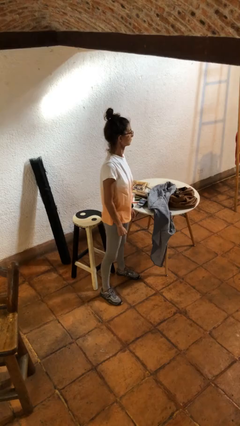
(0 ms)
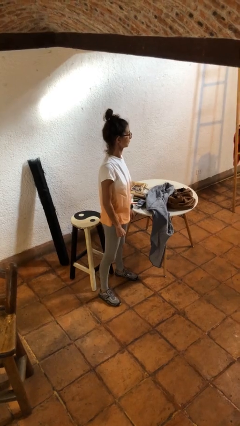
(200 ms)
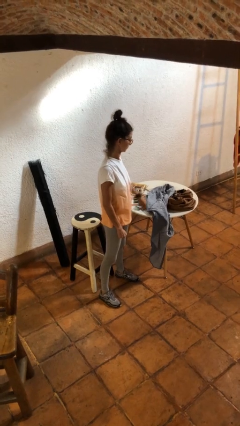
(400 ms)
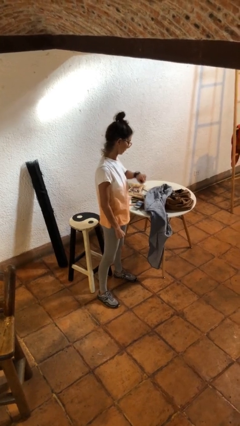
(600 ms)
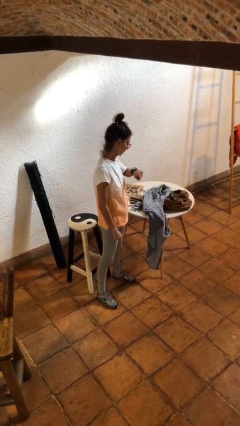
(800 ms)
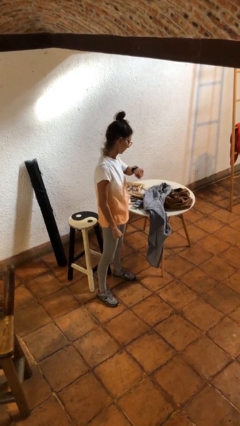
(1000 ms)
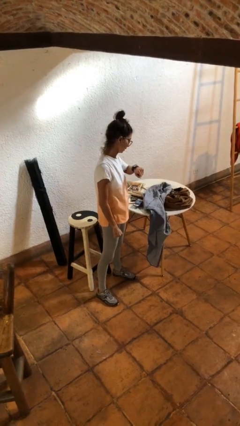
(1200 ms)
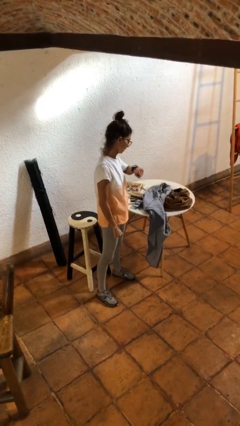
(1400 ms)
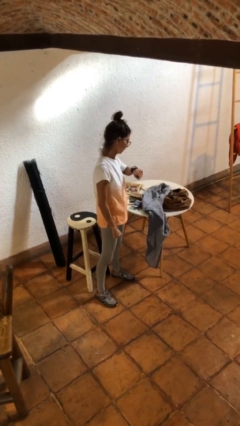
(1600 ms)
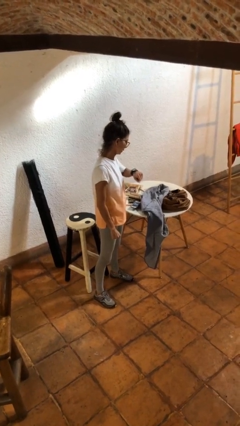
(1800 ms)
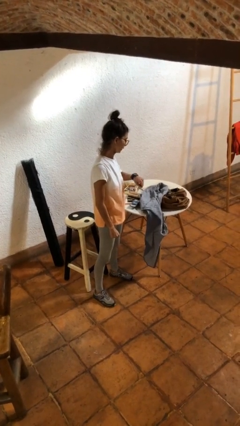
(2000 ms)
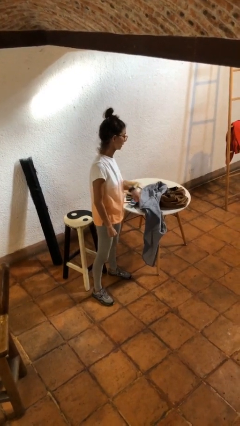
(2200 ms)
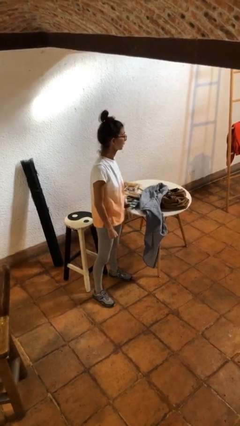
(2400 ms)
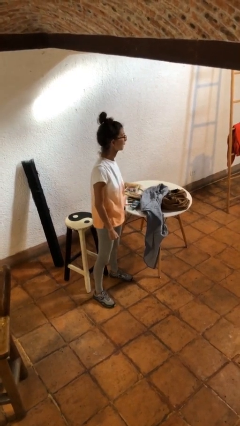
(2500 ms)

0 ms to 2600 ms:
person looks at wristwatch

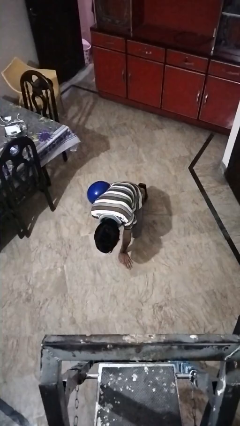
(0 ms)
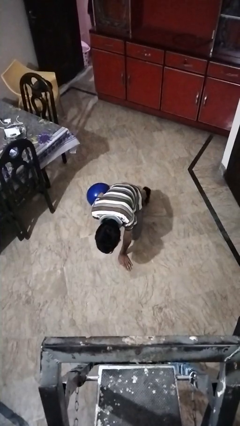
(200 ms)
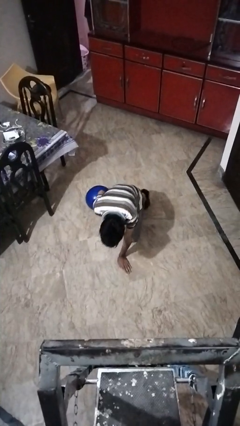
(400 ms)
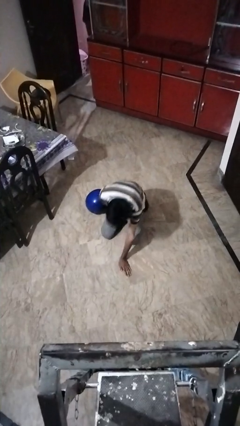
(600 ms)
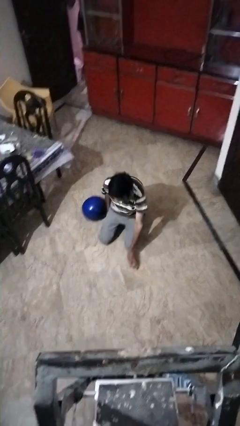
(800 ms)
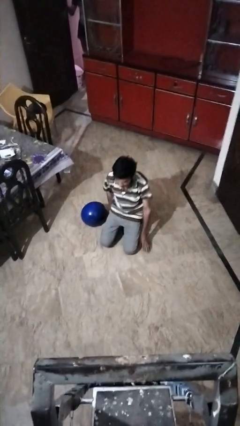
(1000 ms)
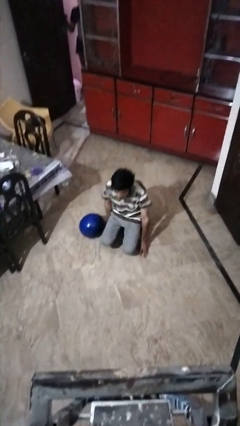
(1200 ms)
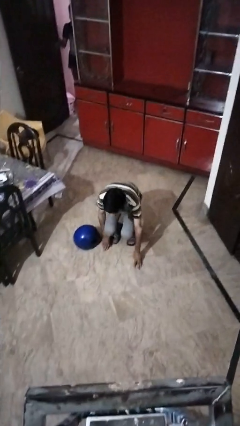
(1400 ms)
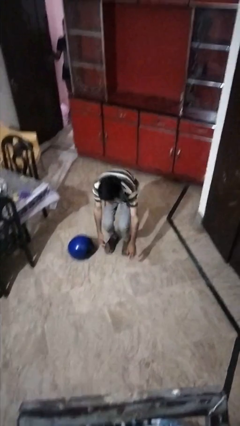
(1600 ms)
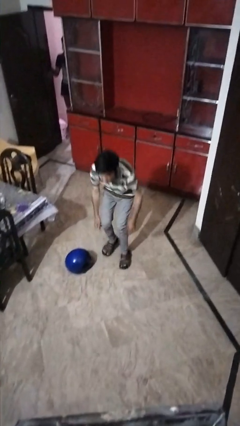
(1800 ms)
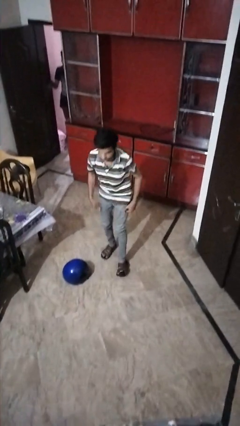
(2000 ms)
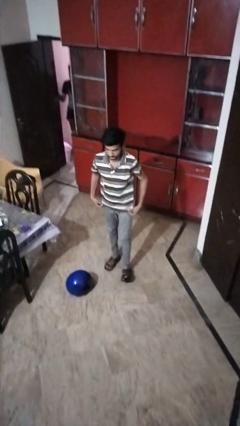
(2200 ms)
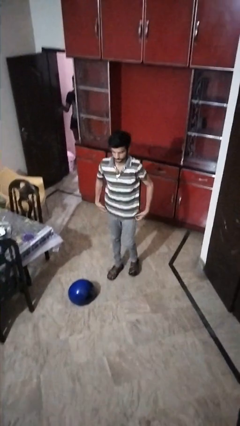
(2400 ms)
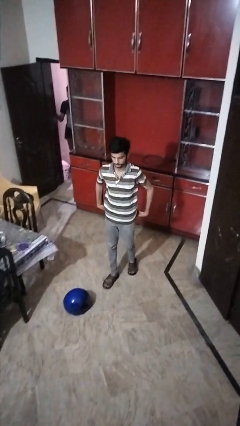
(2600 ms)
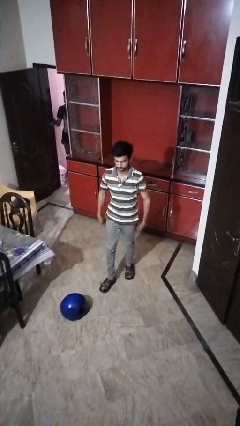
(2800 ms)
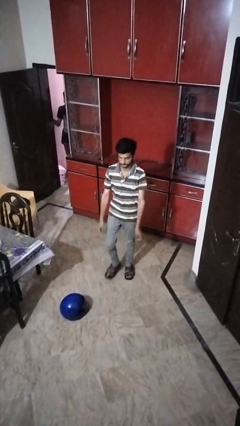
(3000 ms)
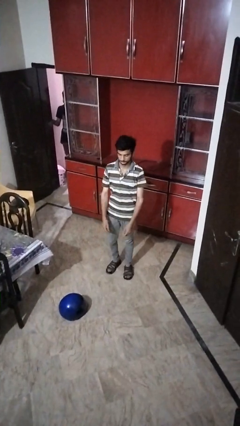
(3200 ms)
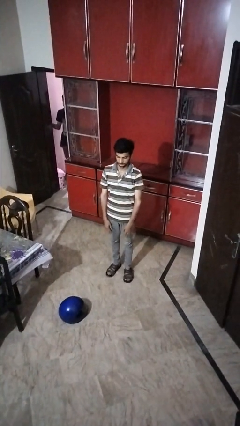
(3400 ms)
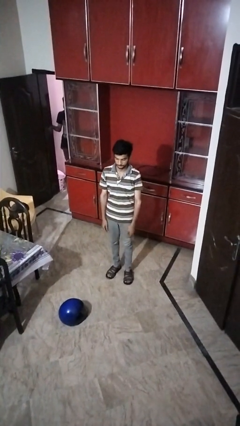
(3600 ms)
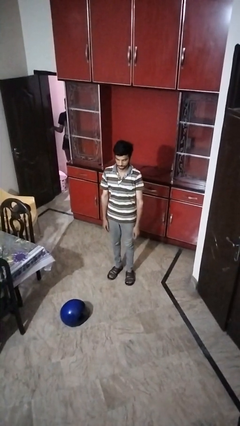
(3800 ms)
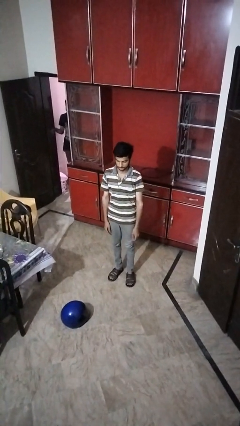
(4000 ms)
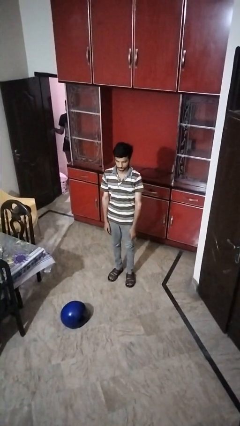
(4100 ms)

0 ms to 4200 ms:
person stands up from floor

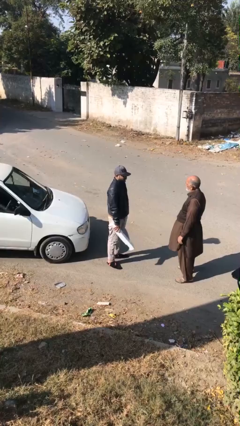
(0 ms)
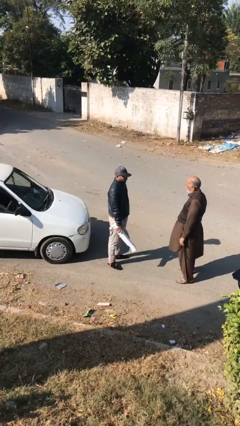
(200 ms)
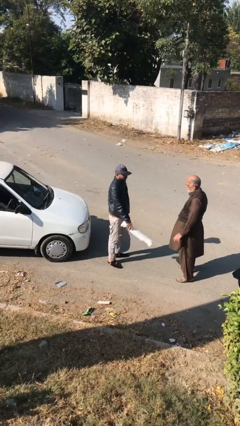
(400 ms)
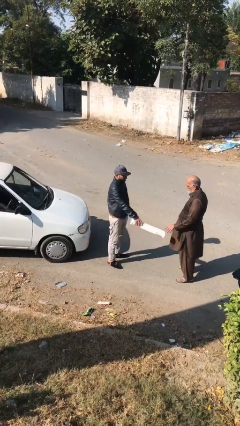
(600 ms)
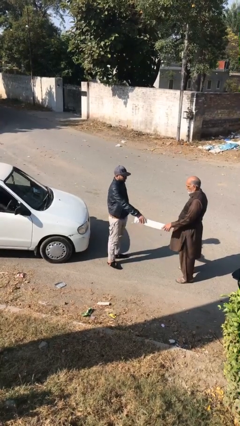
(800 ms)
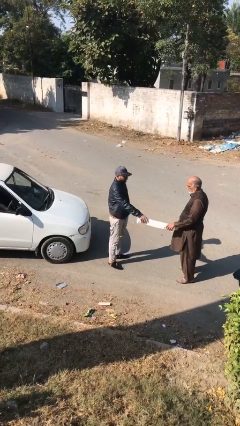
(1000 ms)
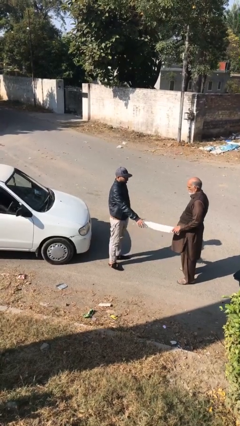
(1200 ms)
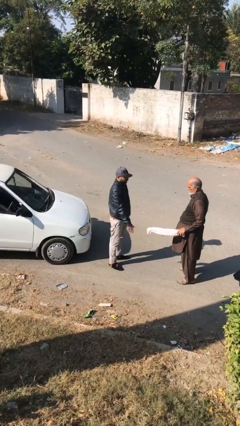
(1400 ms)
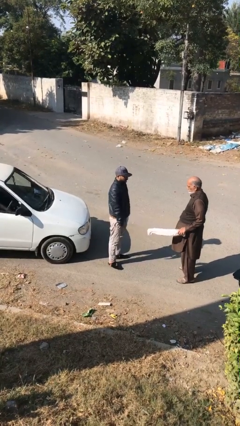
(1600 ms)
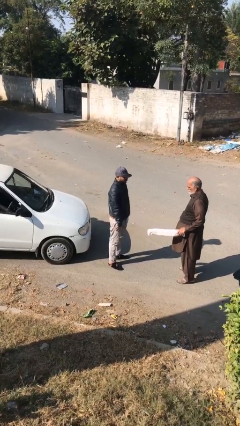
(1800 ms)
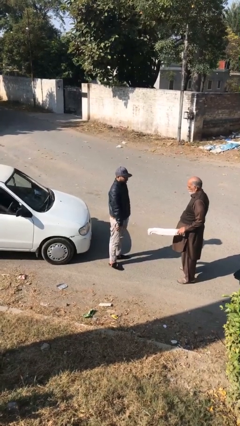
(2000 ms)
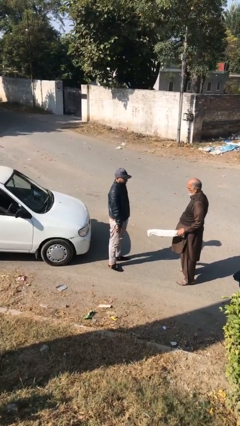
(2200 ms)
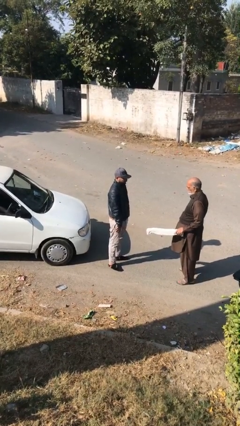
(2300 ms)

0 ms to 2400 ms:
person transfers object to person

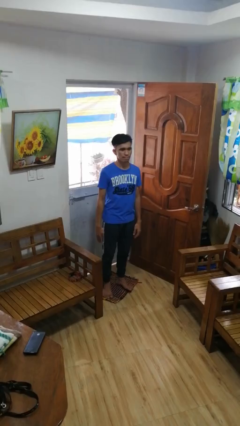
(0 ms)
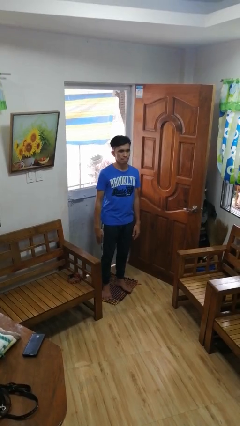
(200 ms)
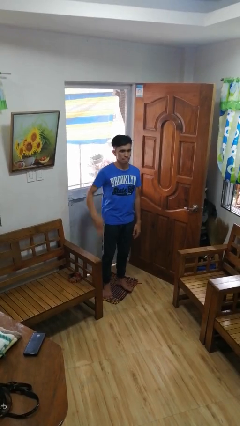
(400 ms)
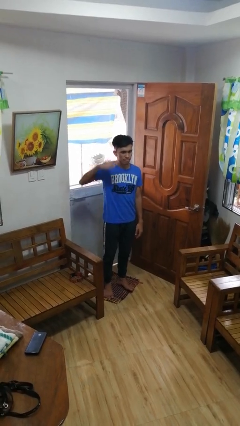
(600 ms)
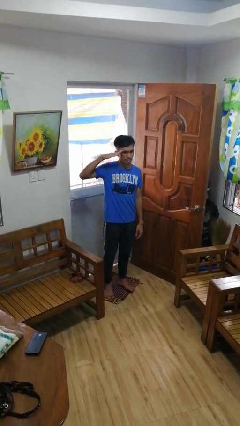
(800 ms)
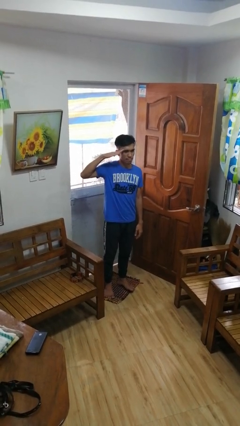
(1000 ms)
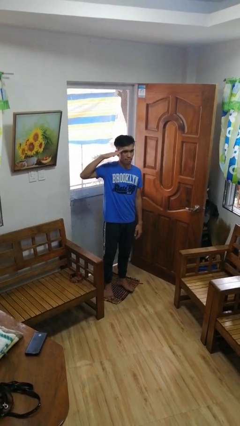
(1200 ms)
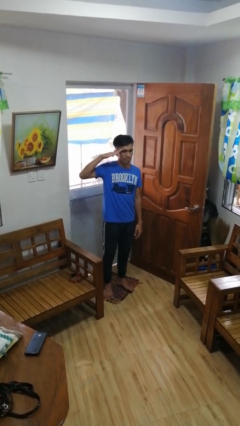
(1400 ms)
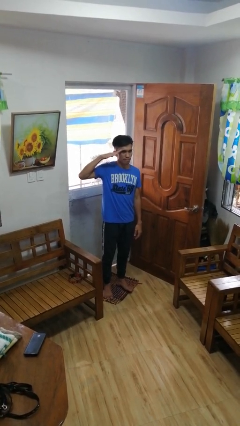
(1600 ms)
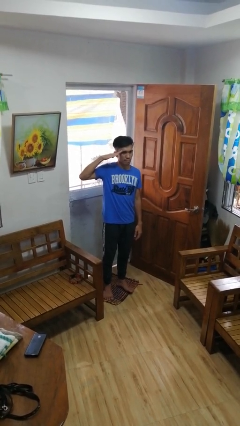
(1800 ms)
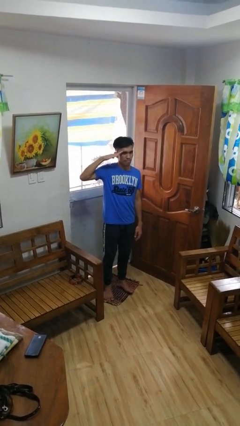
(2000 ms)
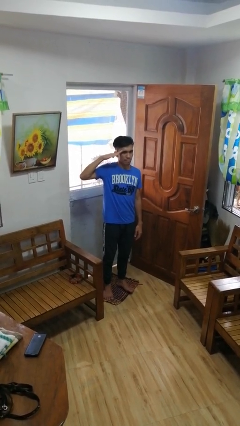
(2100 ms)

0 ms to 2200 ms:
person salutes

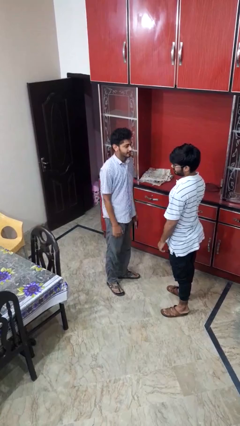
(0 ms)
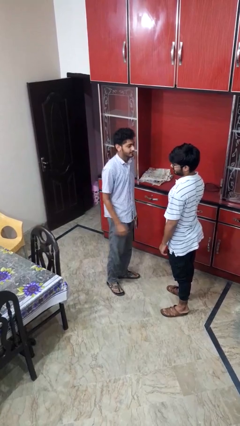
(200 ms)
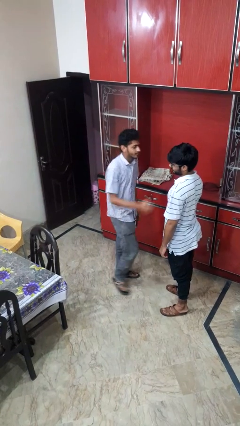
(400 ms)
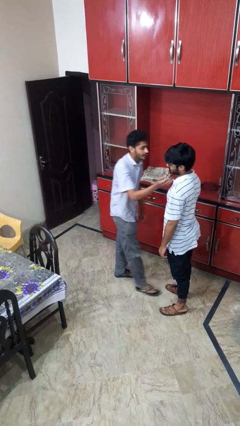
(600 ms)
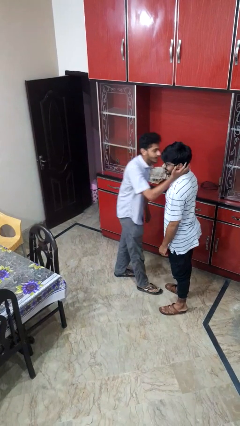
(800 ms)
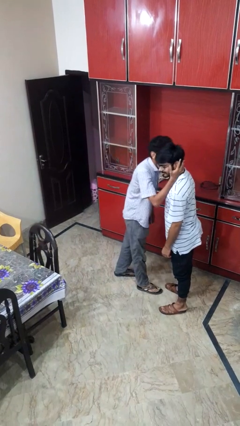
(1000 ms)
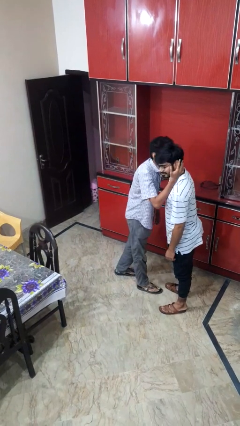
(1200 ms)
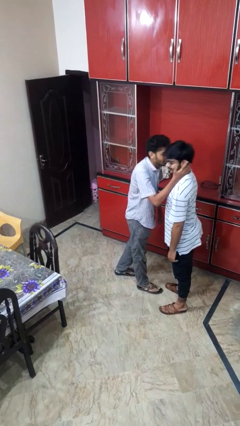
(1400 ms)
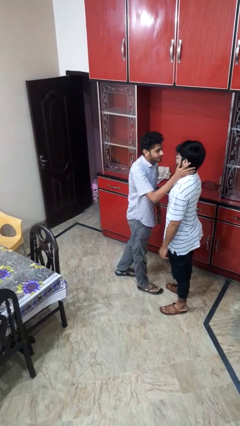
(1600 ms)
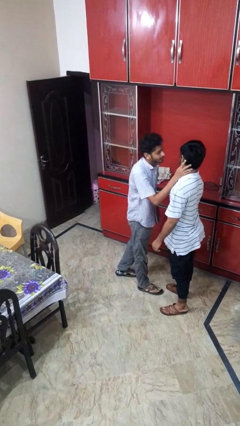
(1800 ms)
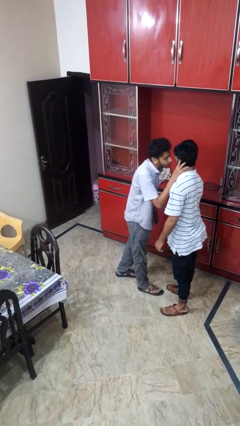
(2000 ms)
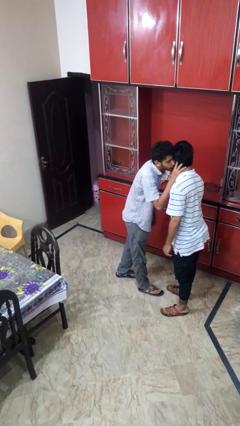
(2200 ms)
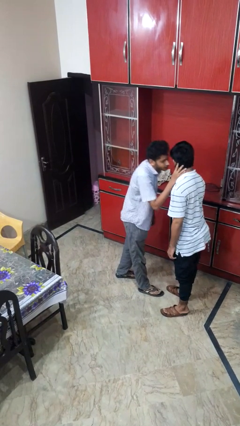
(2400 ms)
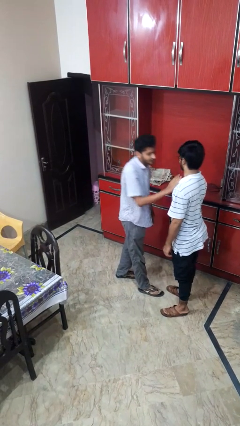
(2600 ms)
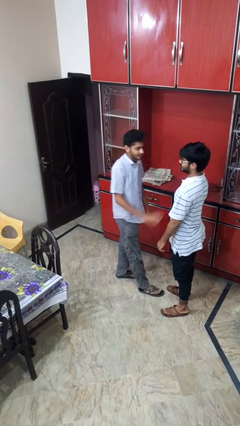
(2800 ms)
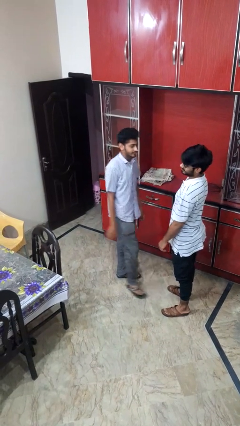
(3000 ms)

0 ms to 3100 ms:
person kisses cheek of person

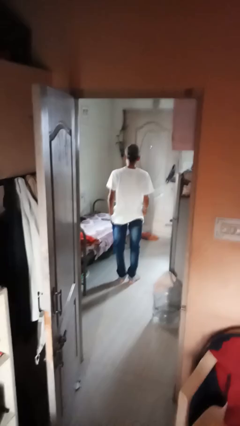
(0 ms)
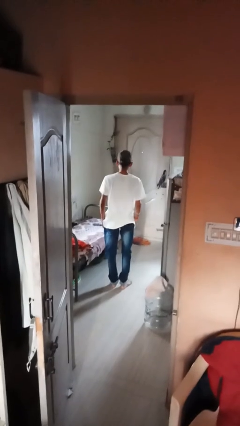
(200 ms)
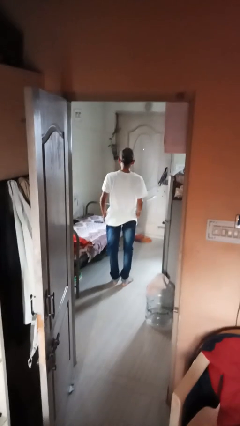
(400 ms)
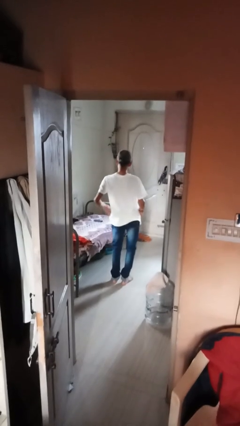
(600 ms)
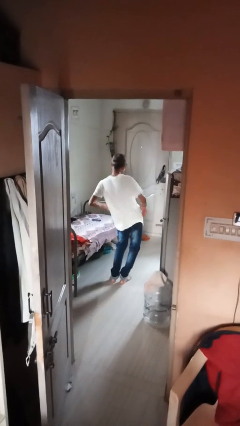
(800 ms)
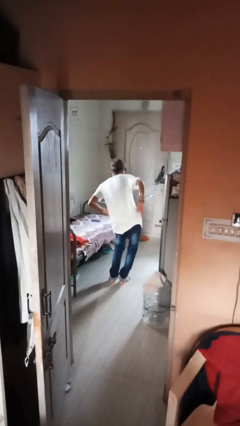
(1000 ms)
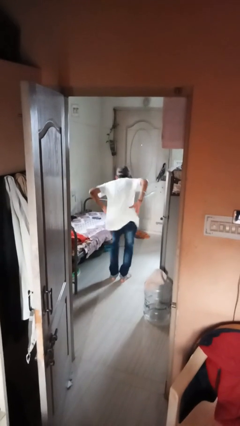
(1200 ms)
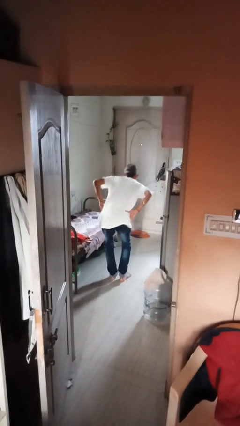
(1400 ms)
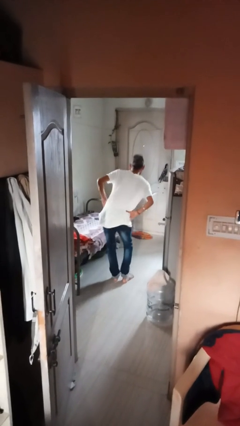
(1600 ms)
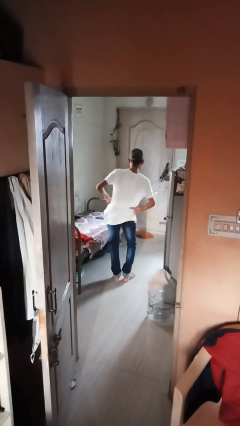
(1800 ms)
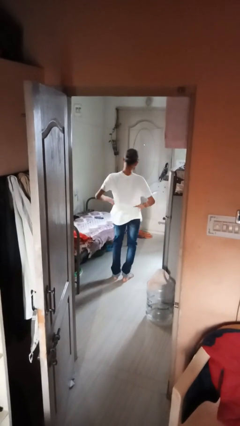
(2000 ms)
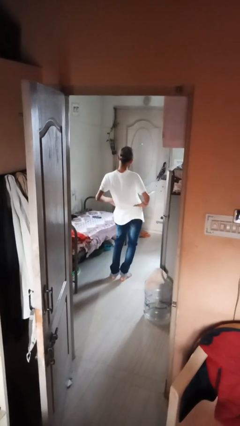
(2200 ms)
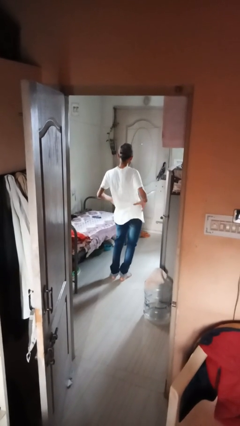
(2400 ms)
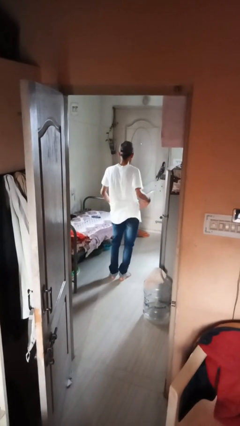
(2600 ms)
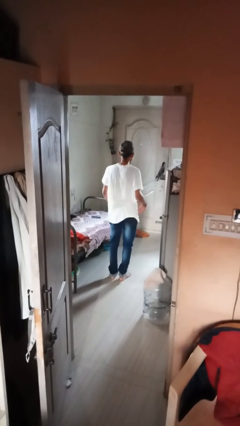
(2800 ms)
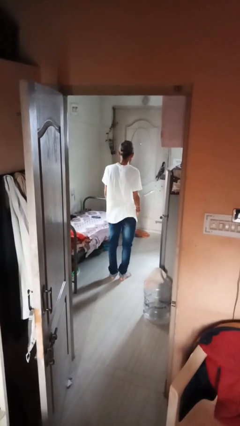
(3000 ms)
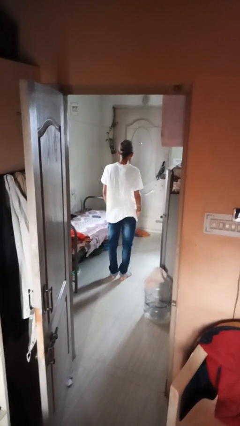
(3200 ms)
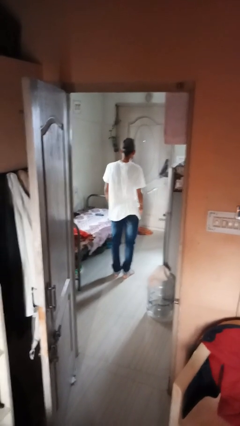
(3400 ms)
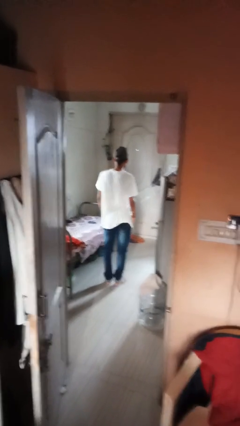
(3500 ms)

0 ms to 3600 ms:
person wiggles hips
